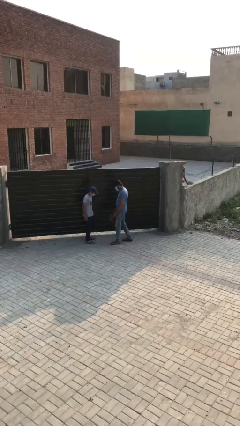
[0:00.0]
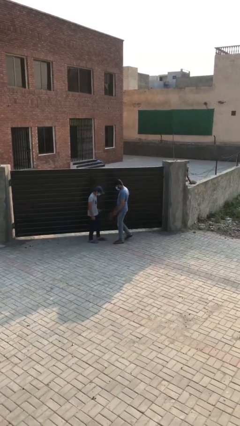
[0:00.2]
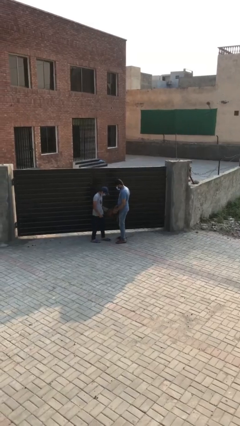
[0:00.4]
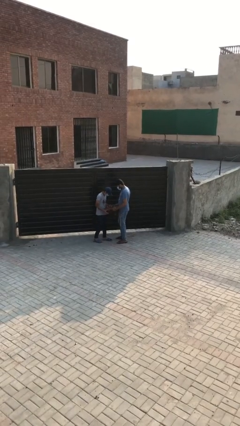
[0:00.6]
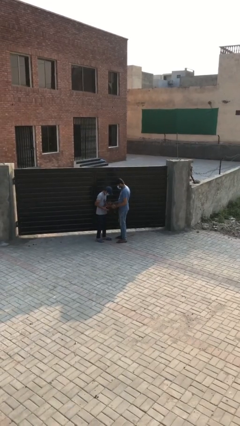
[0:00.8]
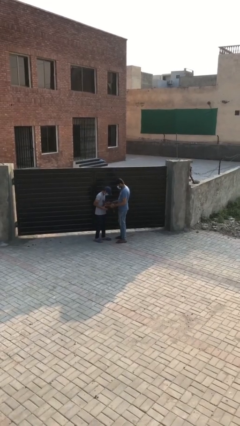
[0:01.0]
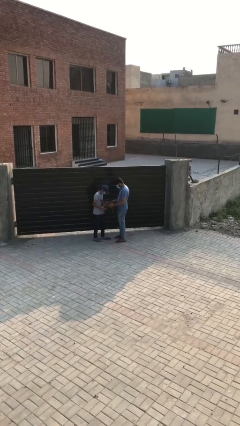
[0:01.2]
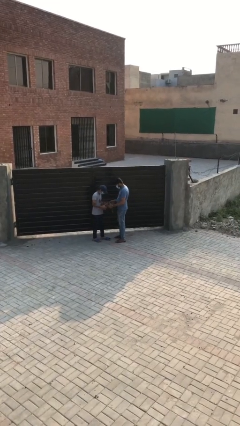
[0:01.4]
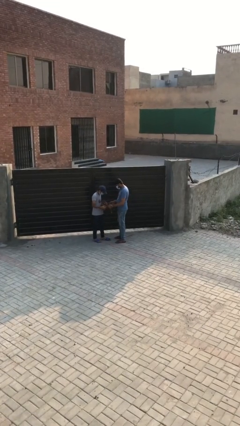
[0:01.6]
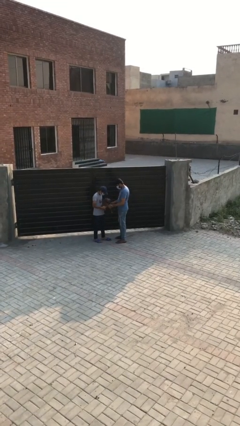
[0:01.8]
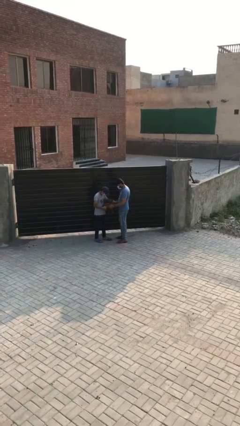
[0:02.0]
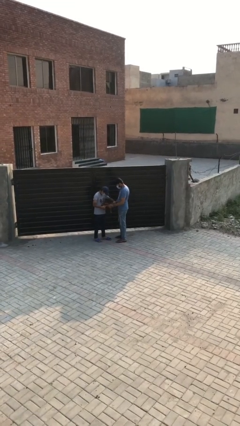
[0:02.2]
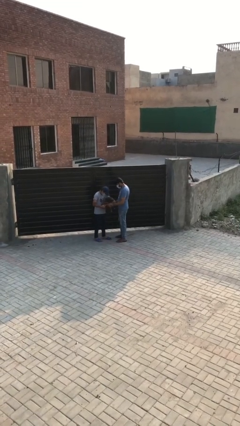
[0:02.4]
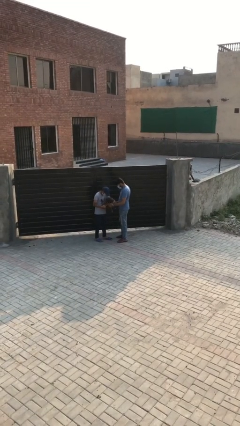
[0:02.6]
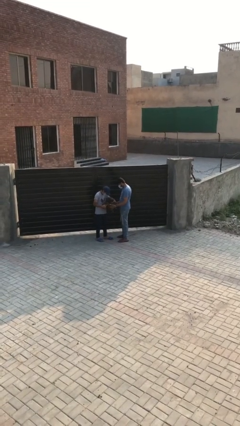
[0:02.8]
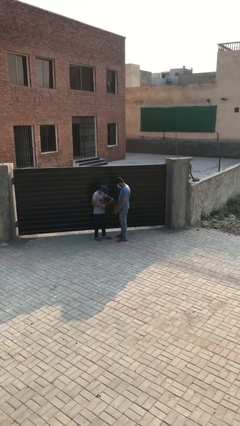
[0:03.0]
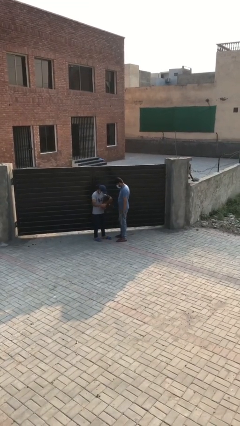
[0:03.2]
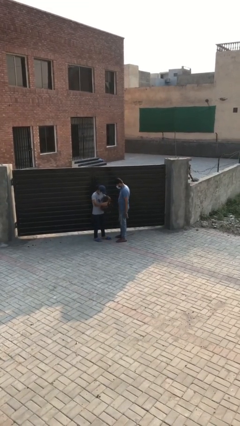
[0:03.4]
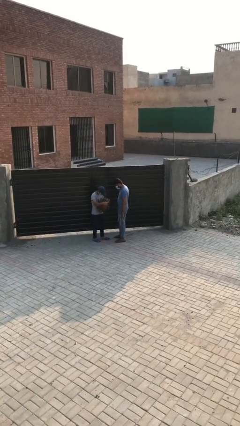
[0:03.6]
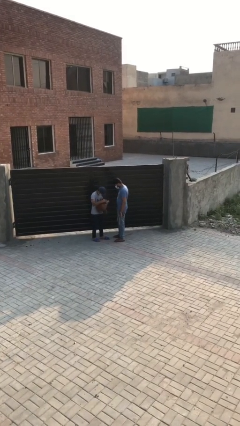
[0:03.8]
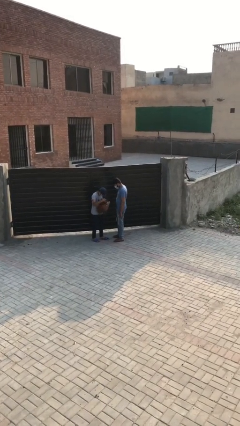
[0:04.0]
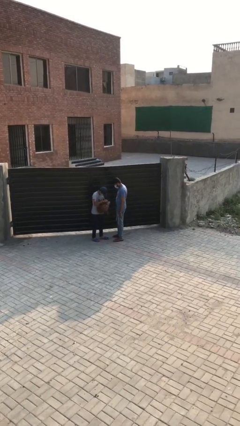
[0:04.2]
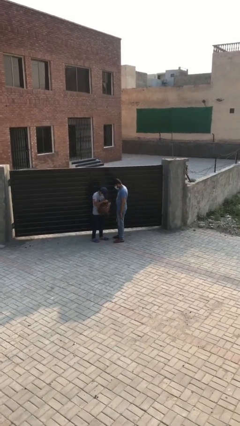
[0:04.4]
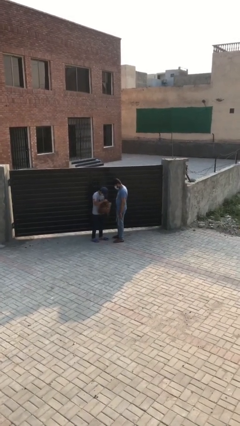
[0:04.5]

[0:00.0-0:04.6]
person transfers object to person

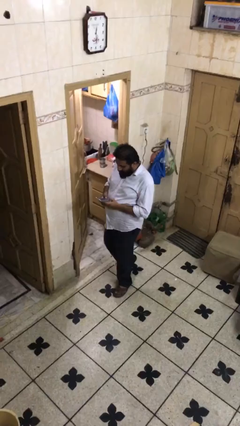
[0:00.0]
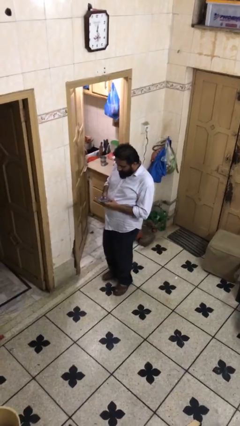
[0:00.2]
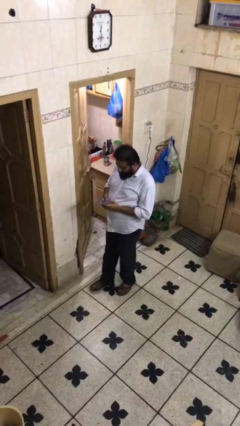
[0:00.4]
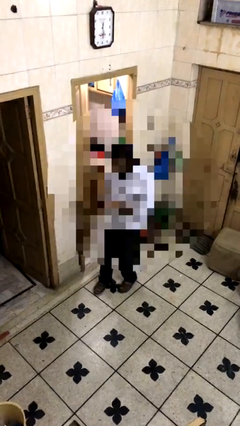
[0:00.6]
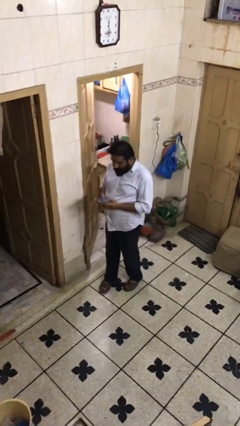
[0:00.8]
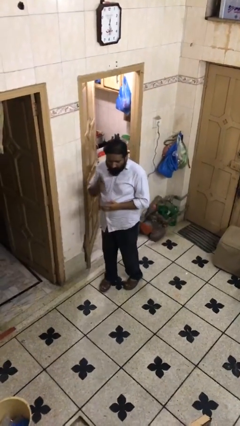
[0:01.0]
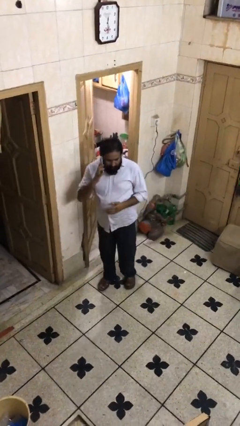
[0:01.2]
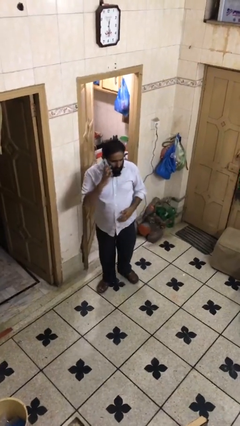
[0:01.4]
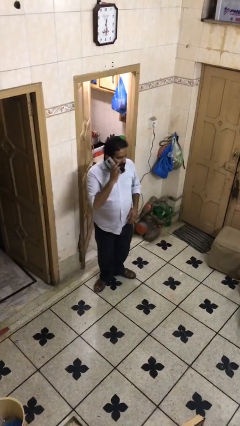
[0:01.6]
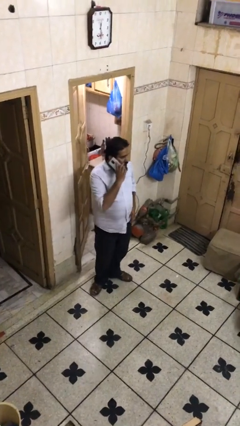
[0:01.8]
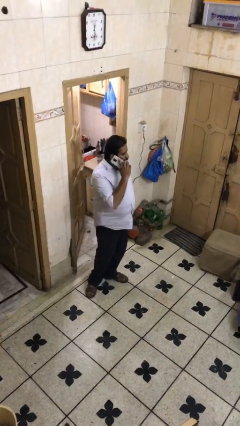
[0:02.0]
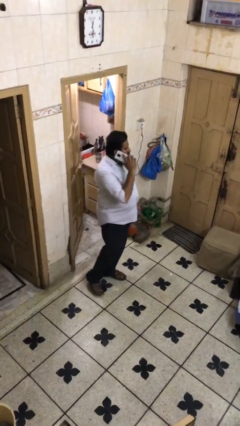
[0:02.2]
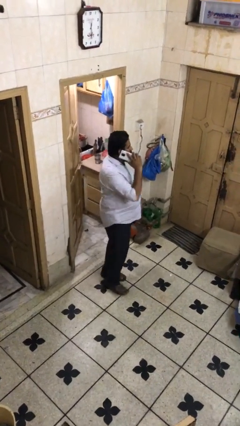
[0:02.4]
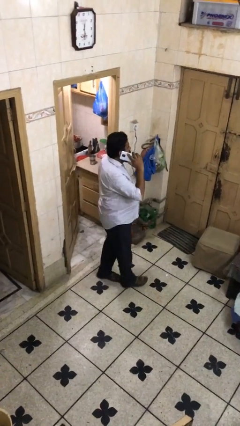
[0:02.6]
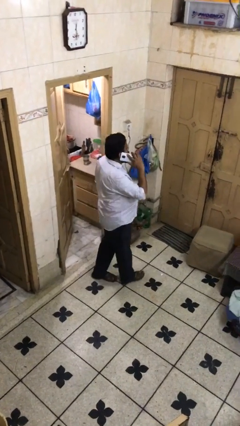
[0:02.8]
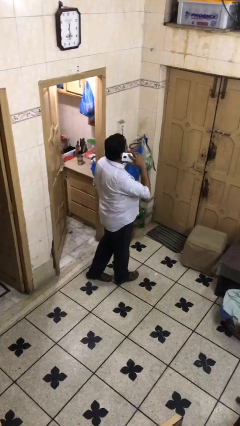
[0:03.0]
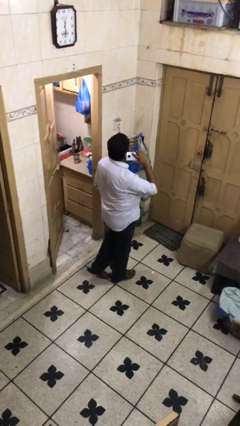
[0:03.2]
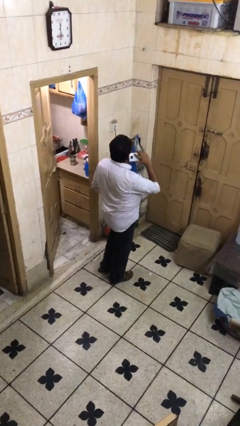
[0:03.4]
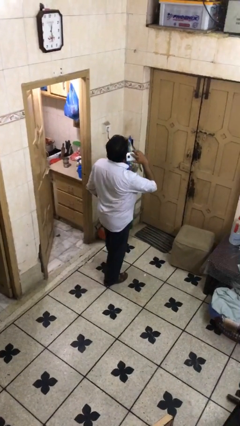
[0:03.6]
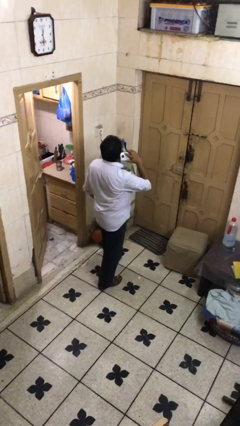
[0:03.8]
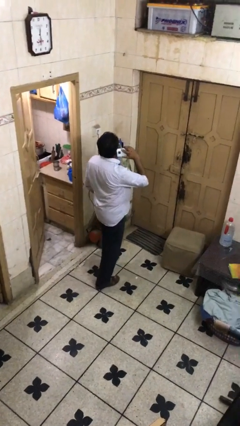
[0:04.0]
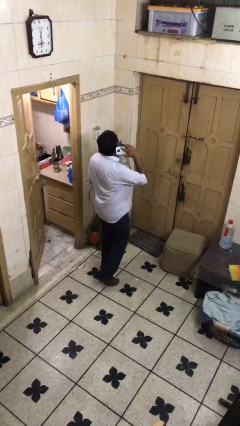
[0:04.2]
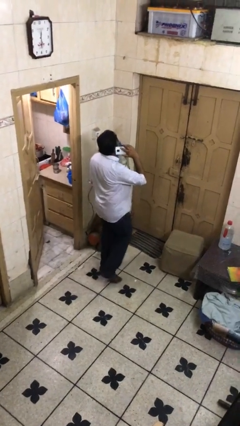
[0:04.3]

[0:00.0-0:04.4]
person talks on phone

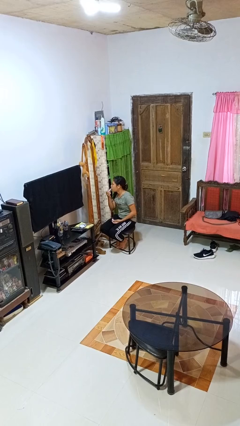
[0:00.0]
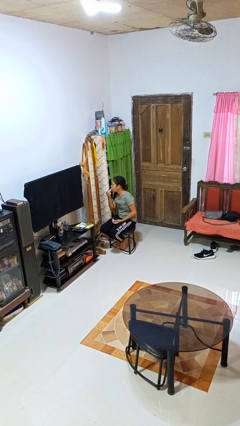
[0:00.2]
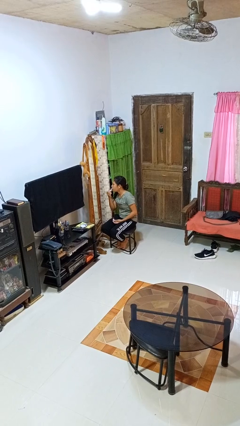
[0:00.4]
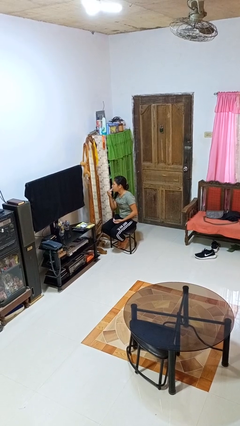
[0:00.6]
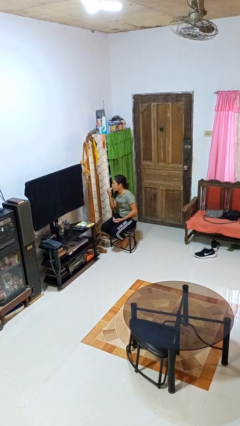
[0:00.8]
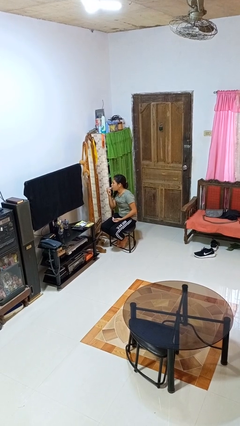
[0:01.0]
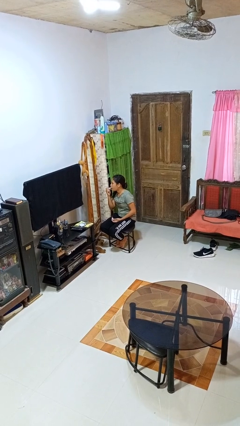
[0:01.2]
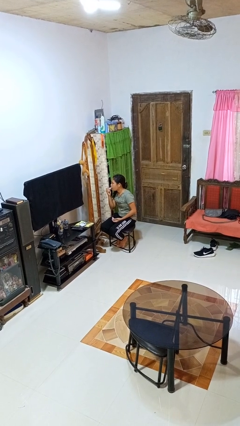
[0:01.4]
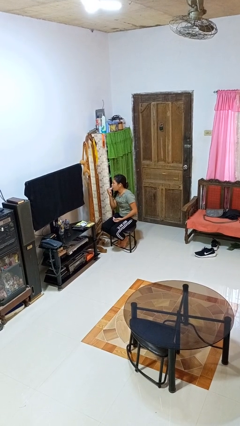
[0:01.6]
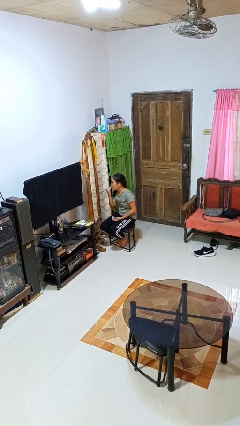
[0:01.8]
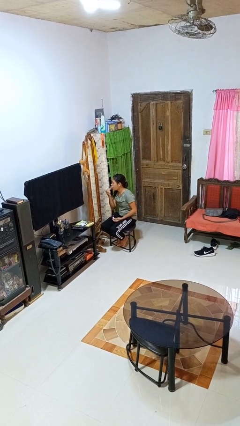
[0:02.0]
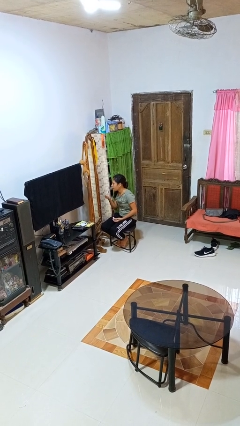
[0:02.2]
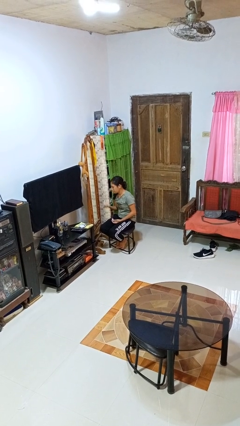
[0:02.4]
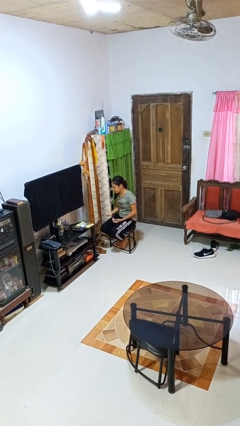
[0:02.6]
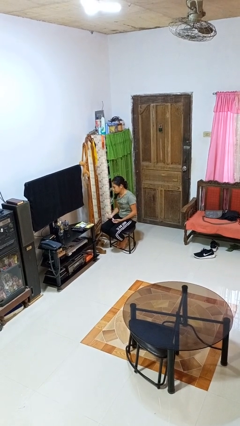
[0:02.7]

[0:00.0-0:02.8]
person applies lip makeup

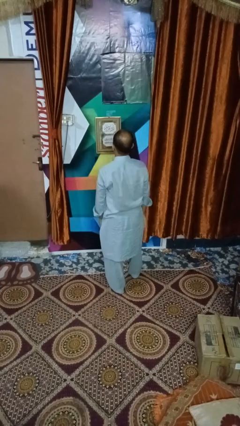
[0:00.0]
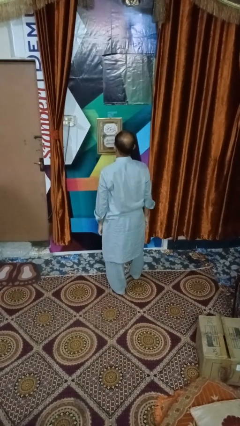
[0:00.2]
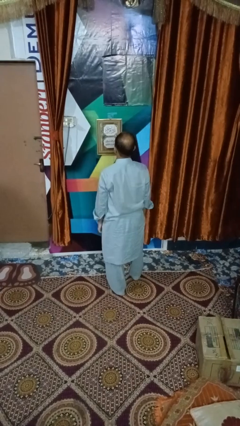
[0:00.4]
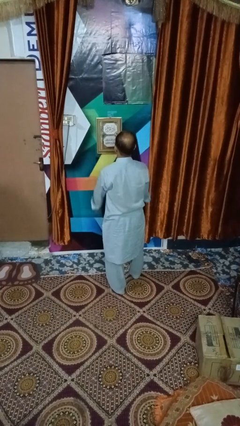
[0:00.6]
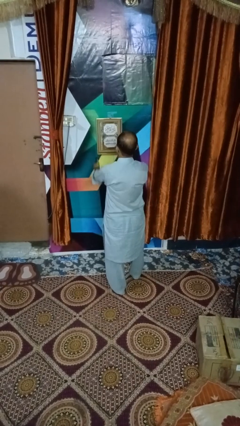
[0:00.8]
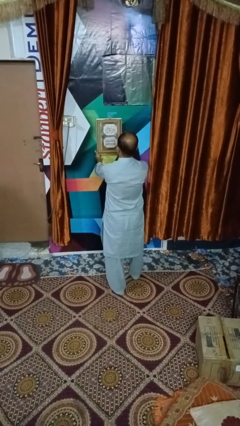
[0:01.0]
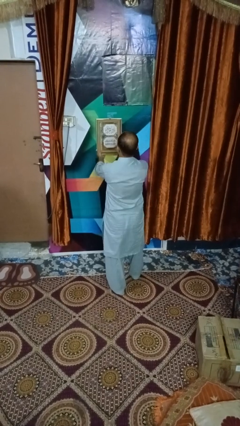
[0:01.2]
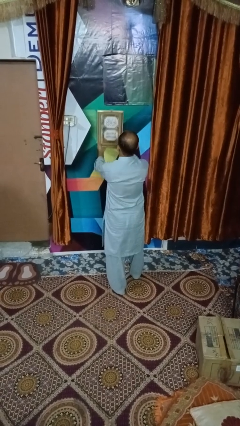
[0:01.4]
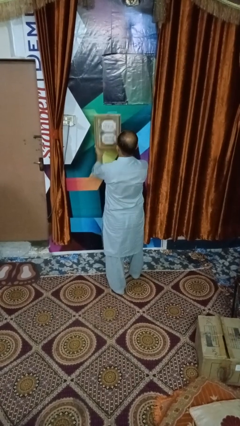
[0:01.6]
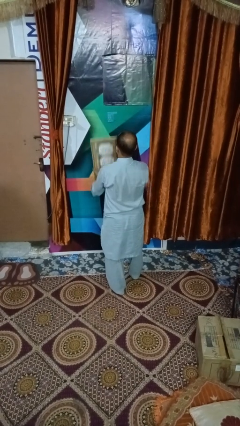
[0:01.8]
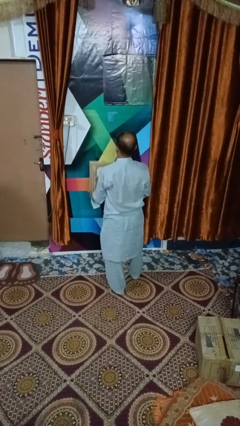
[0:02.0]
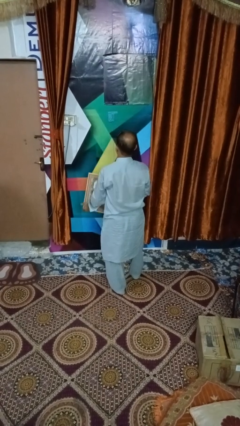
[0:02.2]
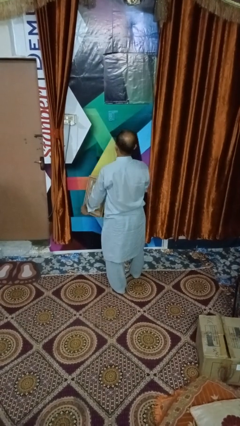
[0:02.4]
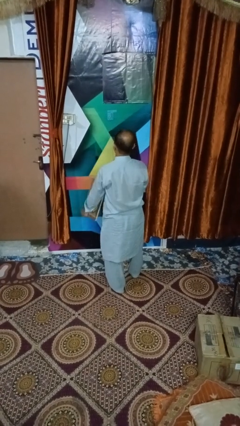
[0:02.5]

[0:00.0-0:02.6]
person takes down picture frame

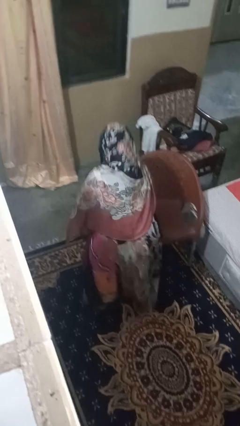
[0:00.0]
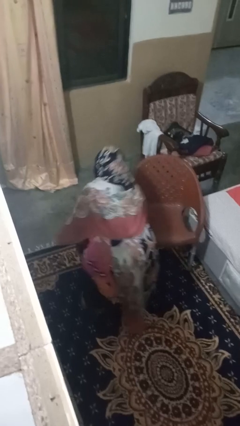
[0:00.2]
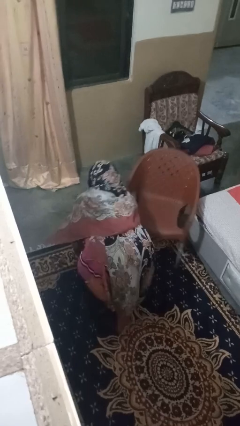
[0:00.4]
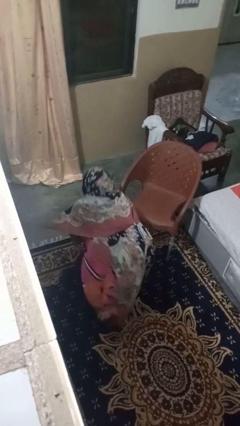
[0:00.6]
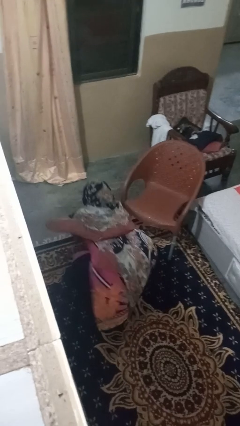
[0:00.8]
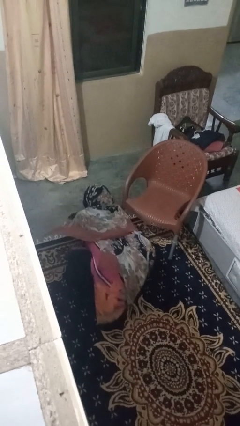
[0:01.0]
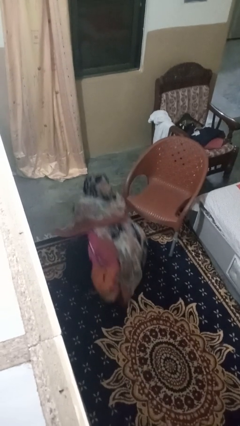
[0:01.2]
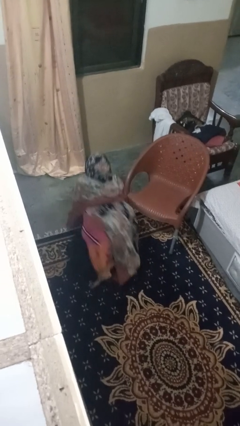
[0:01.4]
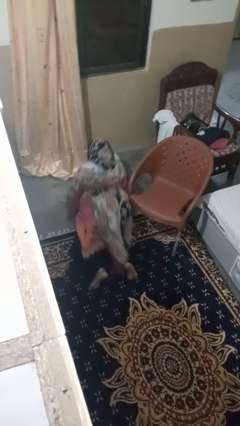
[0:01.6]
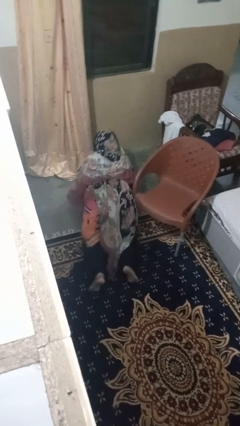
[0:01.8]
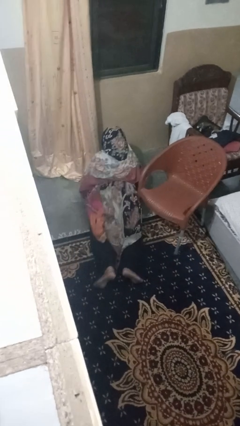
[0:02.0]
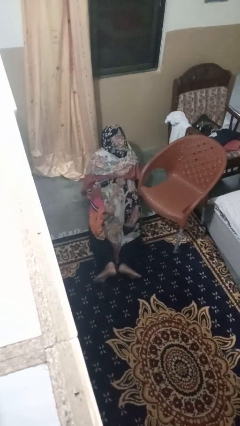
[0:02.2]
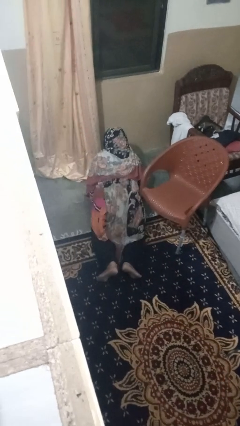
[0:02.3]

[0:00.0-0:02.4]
person lies down on floor

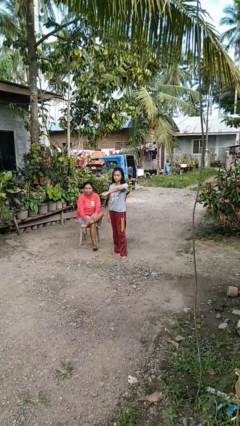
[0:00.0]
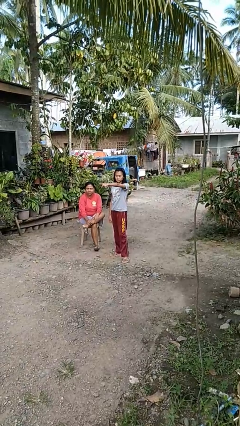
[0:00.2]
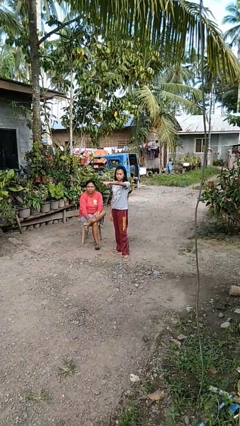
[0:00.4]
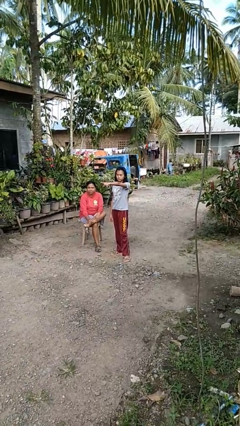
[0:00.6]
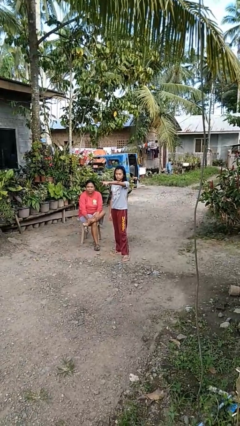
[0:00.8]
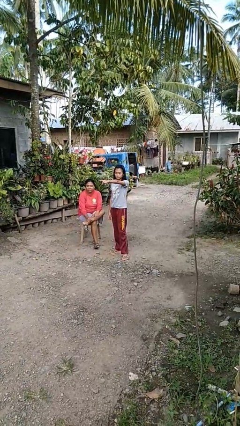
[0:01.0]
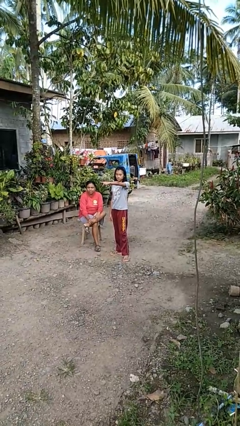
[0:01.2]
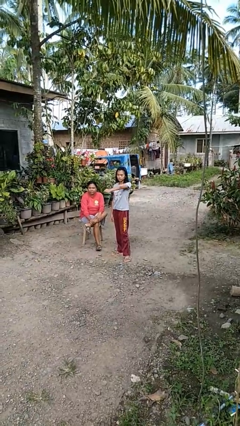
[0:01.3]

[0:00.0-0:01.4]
person points at person
